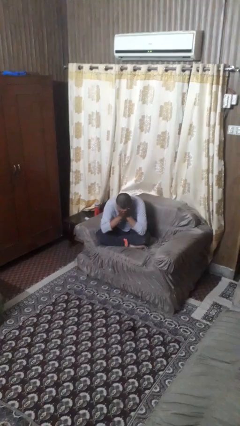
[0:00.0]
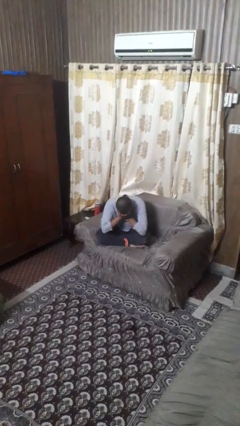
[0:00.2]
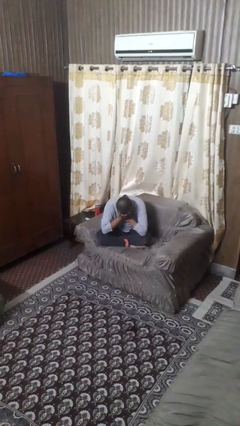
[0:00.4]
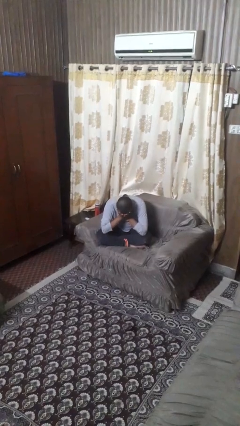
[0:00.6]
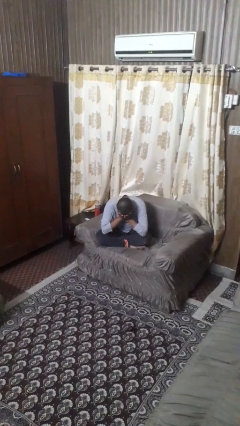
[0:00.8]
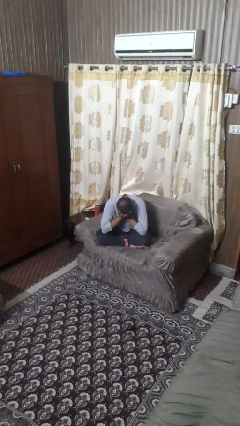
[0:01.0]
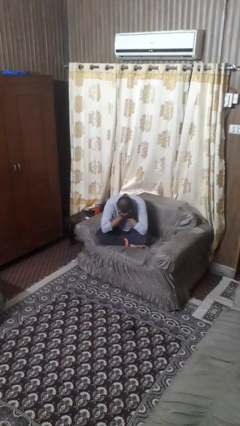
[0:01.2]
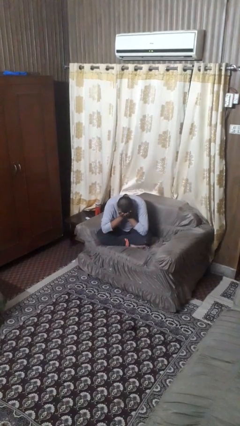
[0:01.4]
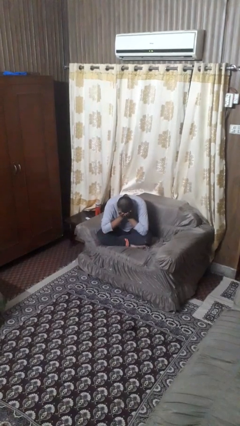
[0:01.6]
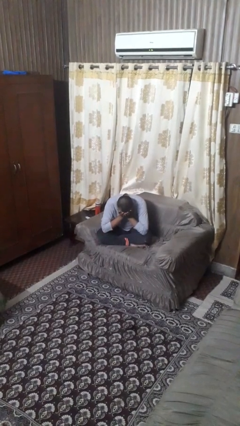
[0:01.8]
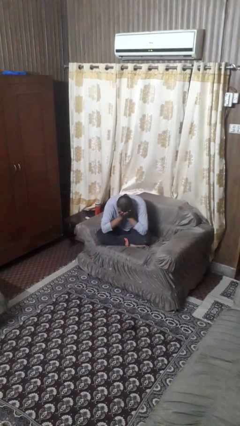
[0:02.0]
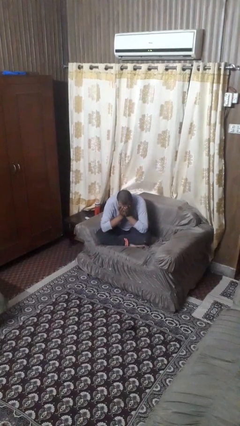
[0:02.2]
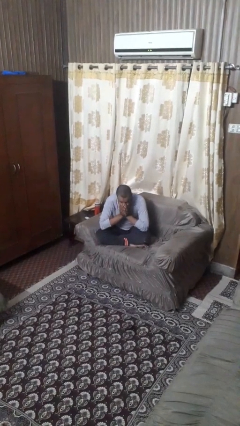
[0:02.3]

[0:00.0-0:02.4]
person covers face with hands

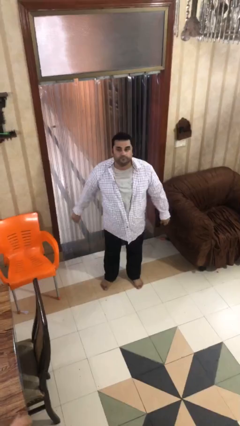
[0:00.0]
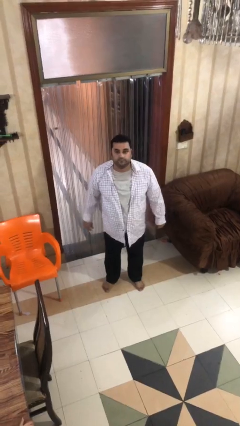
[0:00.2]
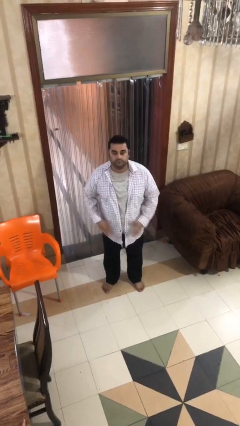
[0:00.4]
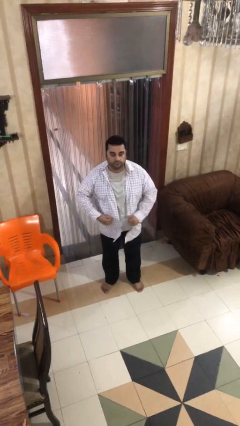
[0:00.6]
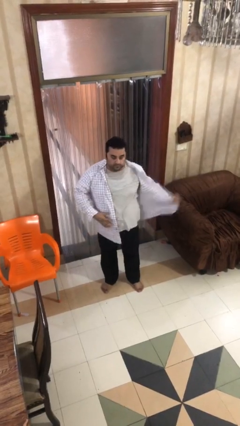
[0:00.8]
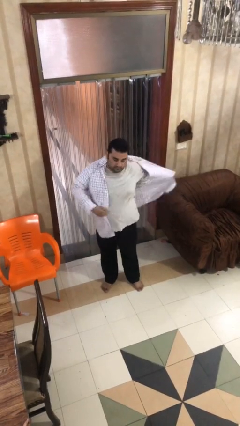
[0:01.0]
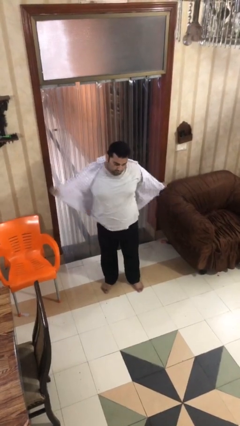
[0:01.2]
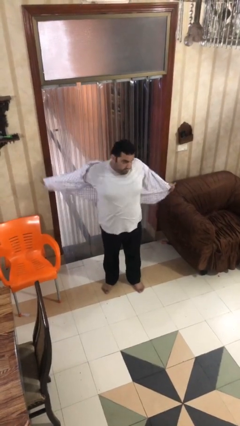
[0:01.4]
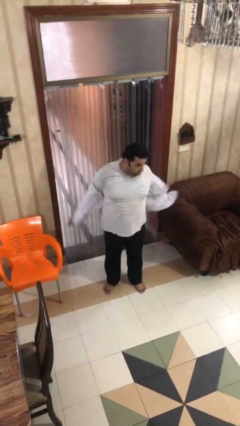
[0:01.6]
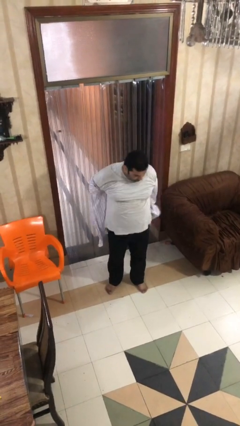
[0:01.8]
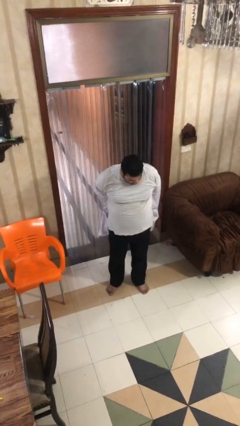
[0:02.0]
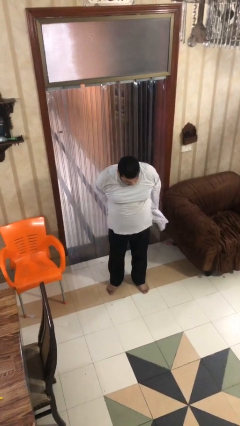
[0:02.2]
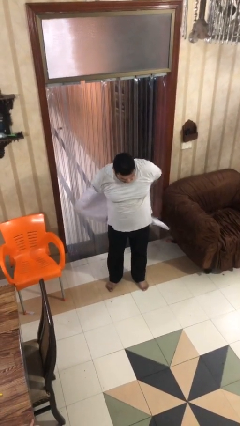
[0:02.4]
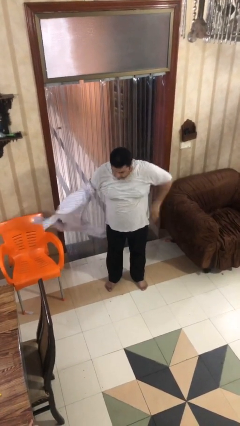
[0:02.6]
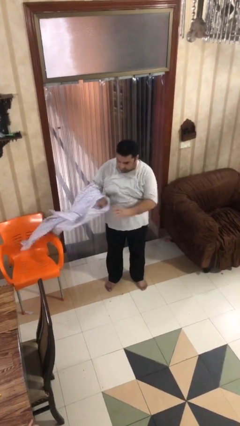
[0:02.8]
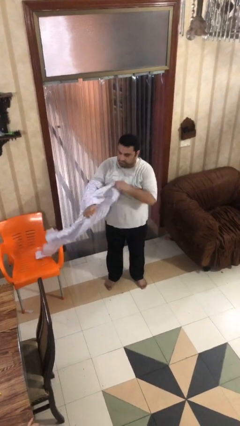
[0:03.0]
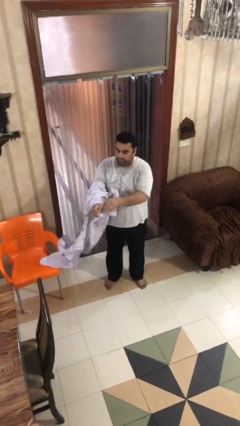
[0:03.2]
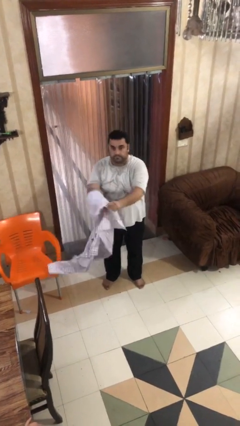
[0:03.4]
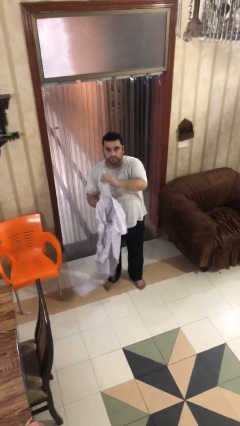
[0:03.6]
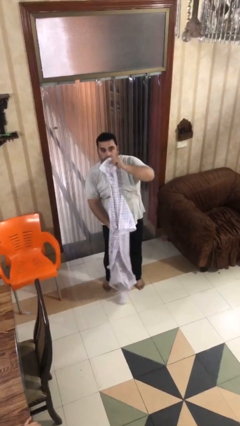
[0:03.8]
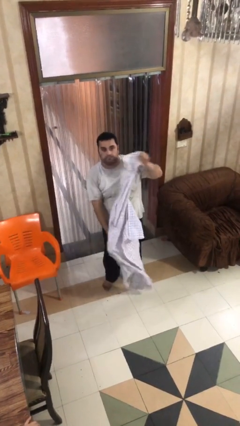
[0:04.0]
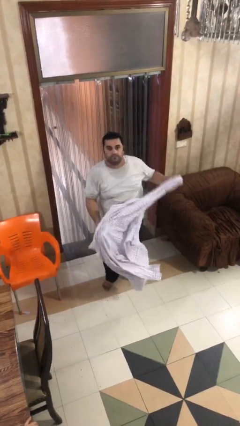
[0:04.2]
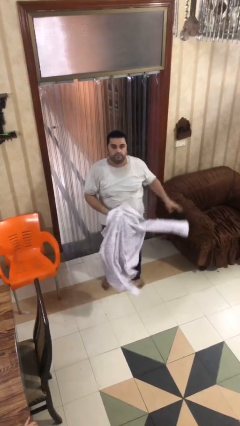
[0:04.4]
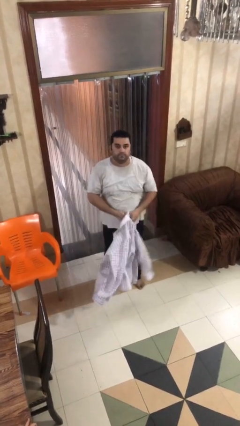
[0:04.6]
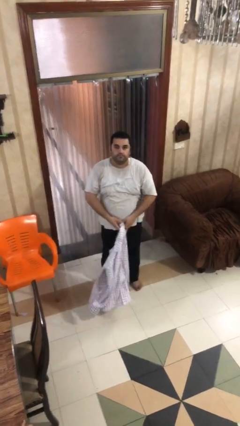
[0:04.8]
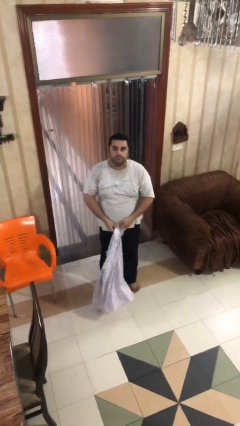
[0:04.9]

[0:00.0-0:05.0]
person takes off shirt

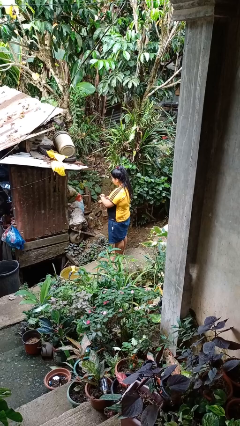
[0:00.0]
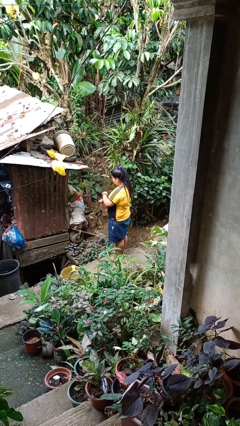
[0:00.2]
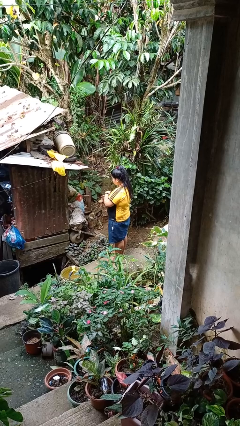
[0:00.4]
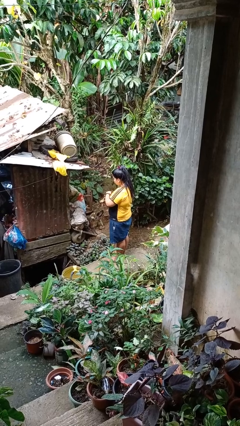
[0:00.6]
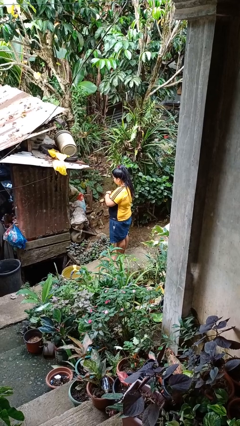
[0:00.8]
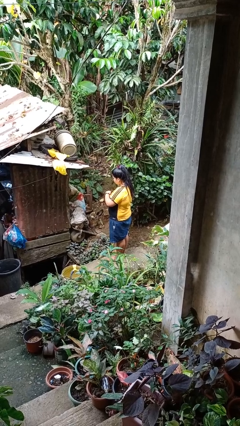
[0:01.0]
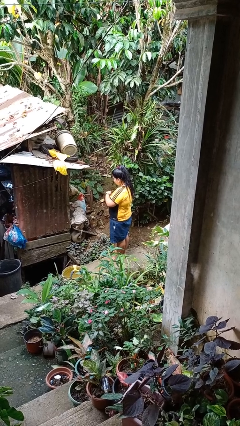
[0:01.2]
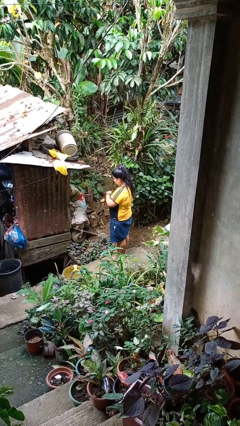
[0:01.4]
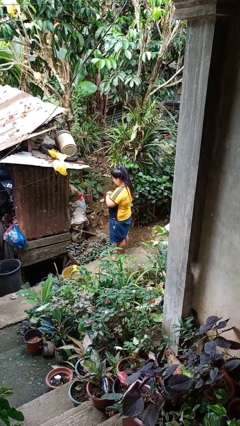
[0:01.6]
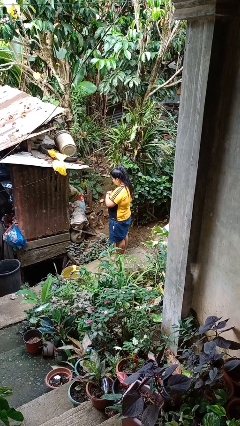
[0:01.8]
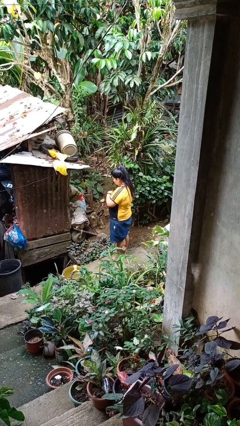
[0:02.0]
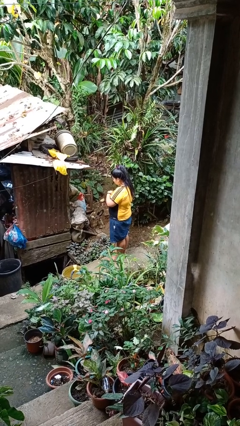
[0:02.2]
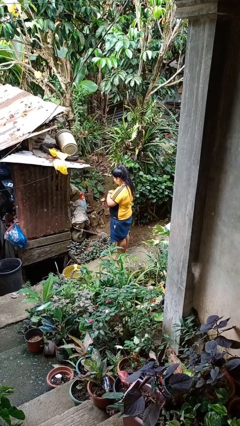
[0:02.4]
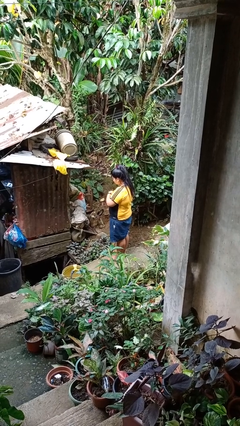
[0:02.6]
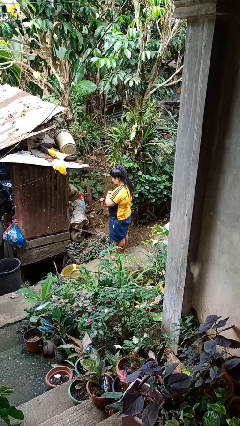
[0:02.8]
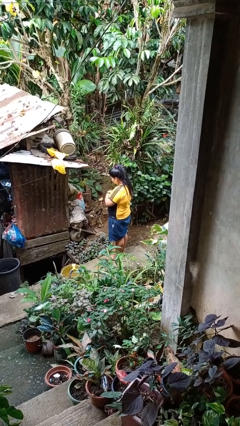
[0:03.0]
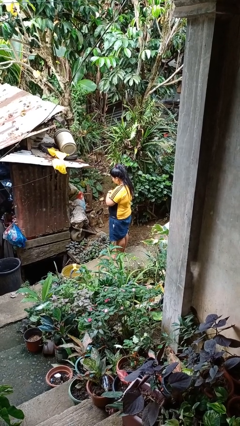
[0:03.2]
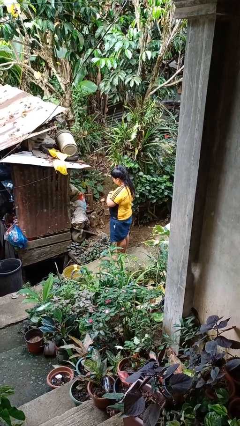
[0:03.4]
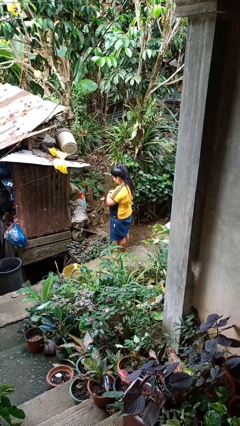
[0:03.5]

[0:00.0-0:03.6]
person puts on wristwatch

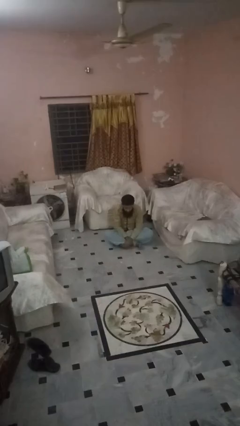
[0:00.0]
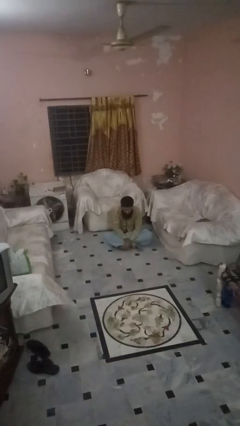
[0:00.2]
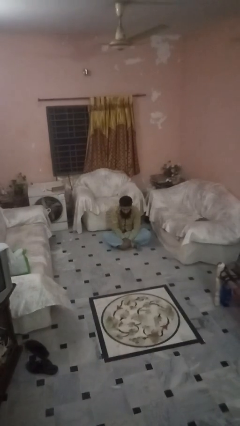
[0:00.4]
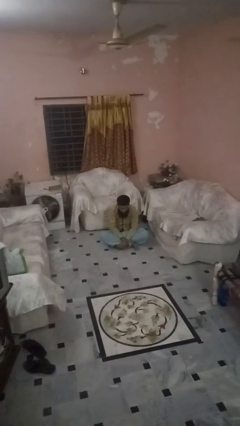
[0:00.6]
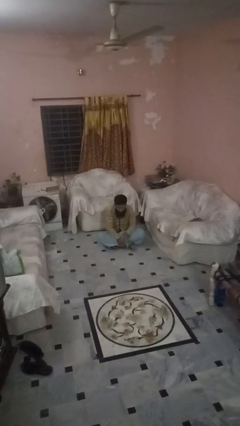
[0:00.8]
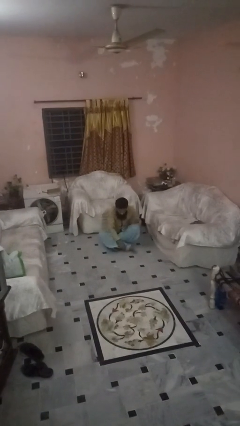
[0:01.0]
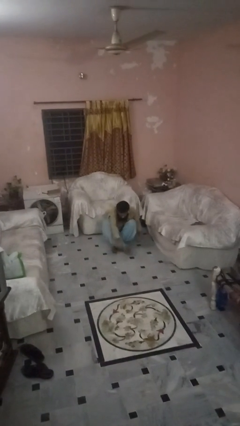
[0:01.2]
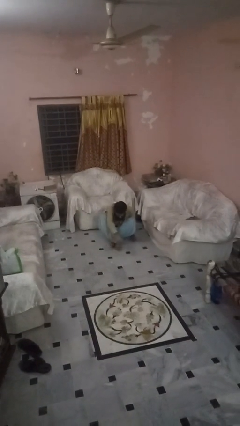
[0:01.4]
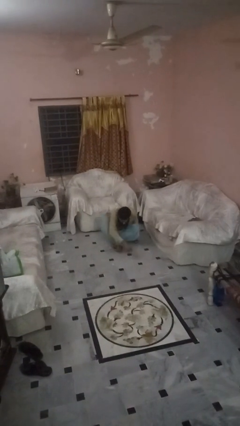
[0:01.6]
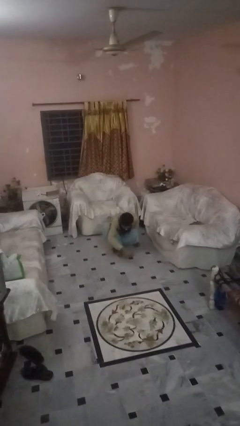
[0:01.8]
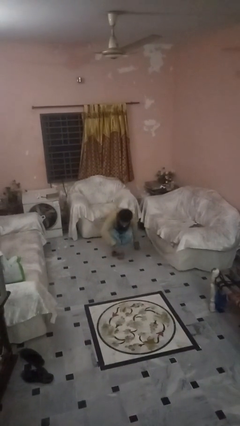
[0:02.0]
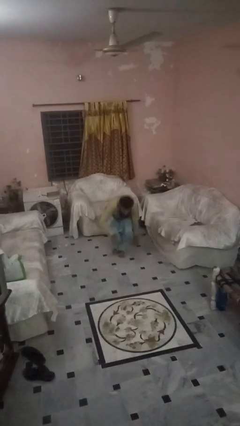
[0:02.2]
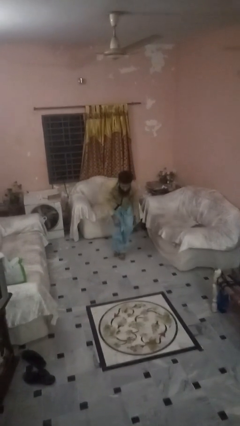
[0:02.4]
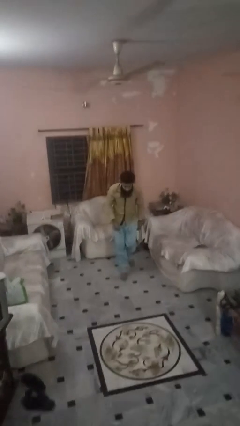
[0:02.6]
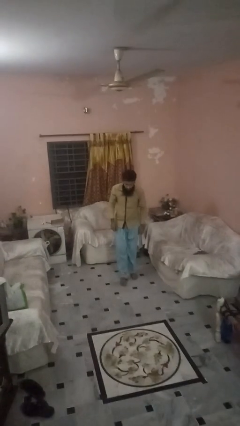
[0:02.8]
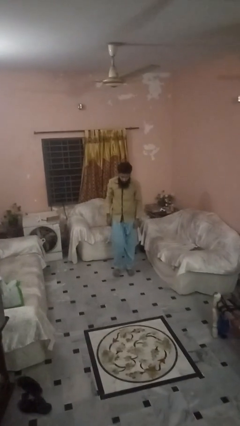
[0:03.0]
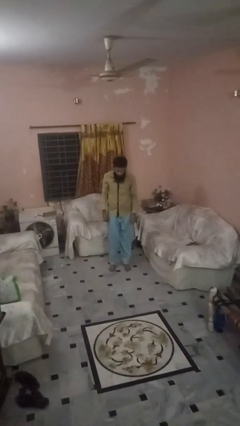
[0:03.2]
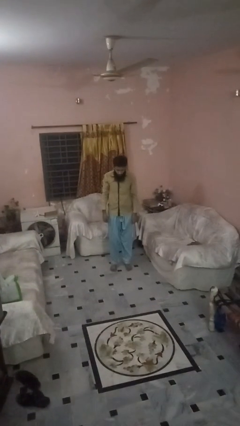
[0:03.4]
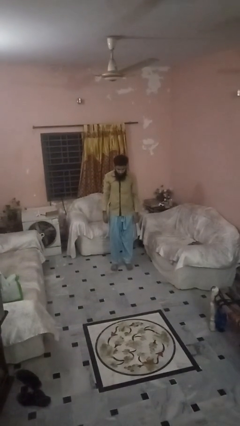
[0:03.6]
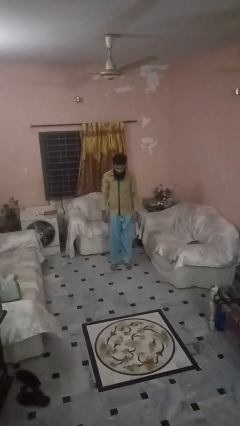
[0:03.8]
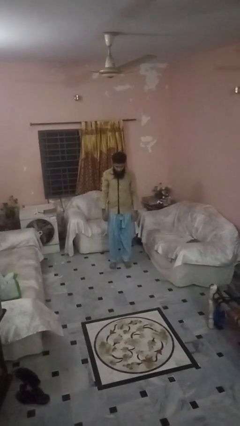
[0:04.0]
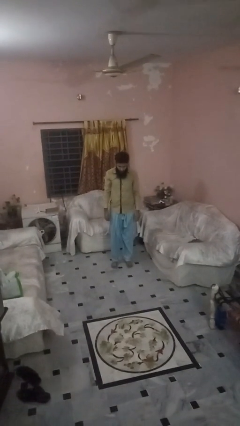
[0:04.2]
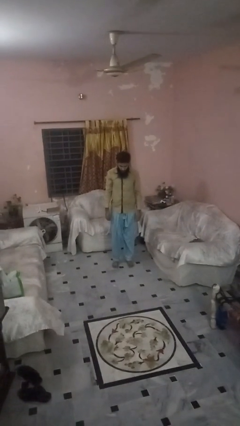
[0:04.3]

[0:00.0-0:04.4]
person stands up from floor

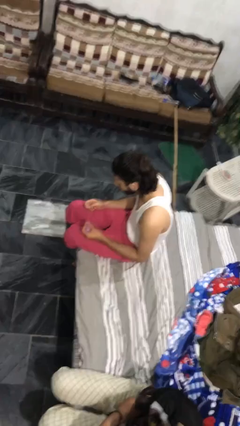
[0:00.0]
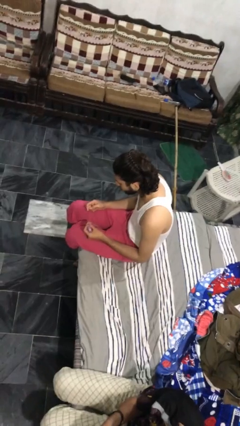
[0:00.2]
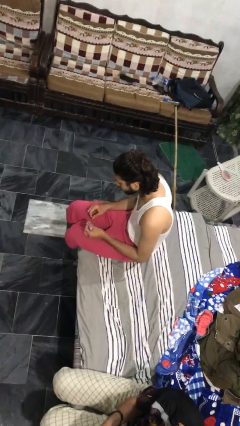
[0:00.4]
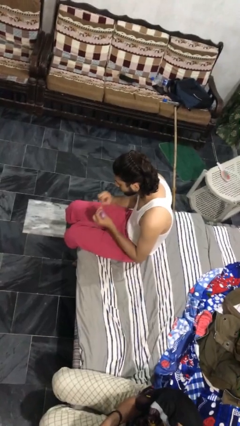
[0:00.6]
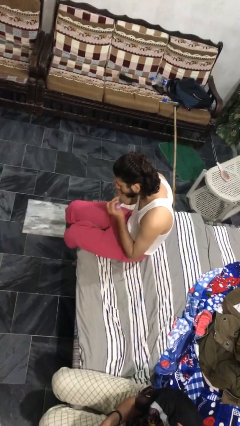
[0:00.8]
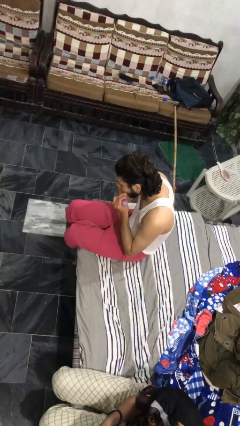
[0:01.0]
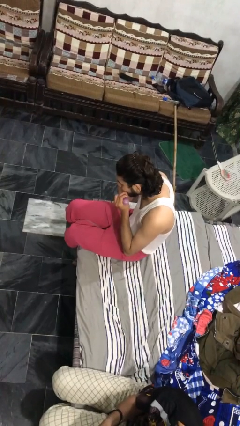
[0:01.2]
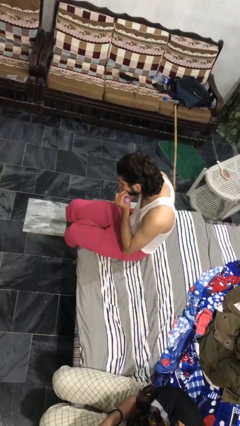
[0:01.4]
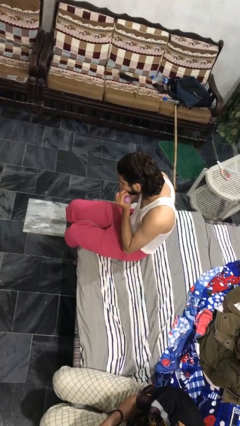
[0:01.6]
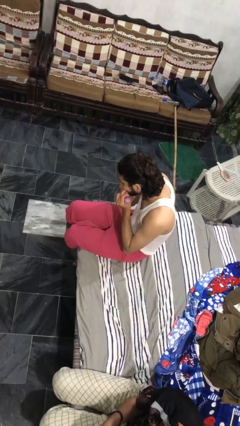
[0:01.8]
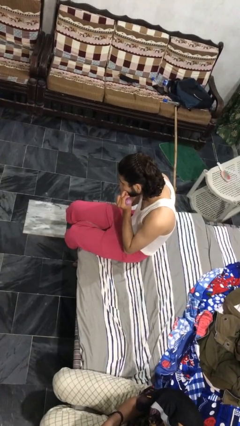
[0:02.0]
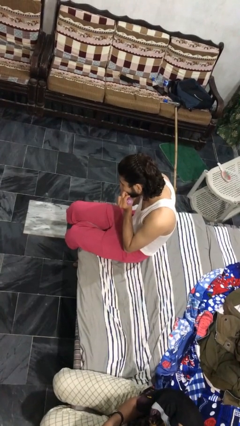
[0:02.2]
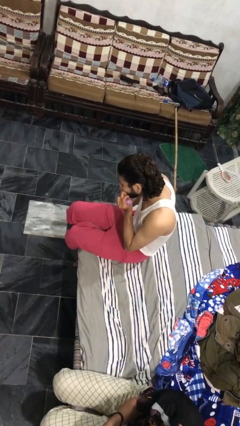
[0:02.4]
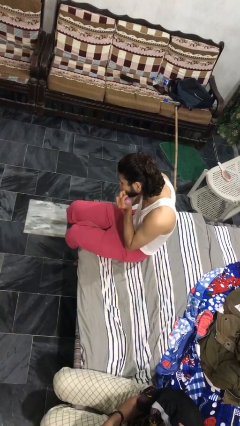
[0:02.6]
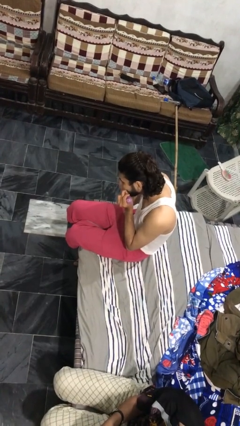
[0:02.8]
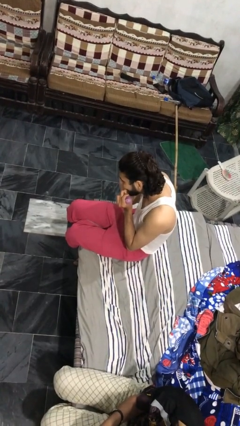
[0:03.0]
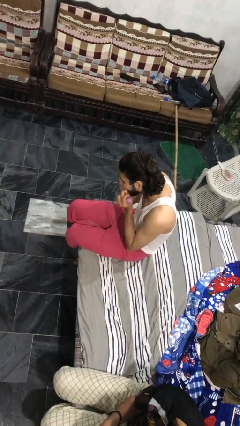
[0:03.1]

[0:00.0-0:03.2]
person flosses
